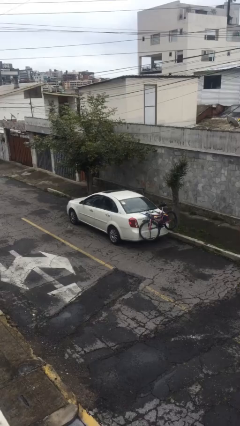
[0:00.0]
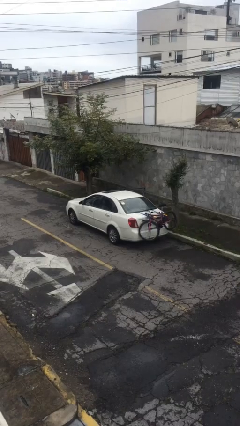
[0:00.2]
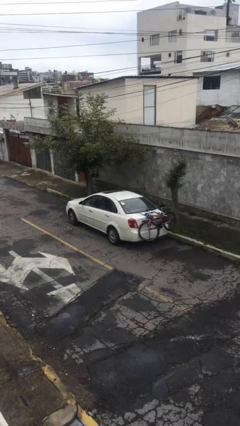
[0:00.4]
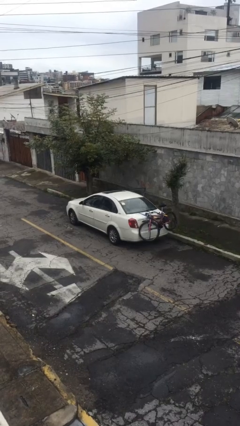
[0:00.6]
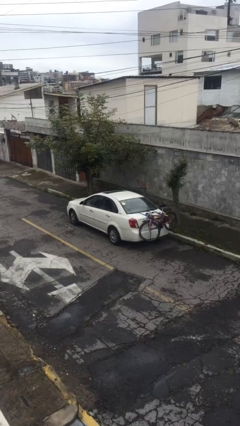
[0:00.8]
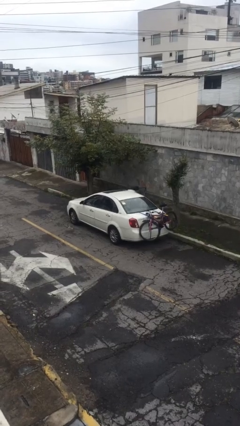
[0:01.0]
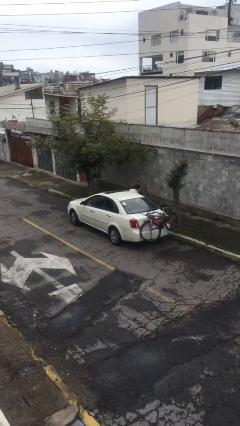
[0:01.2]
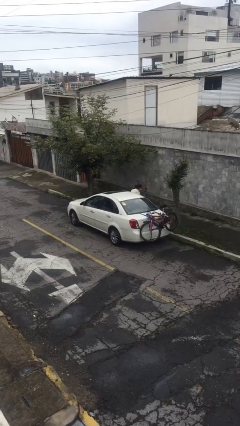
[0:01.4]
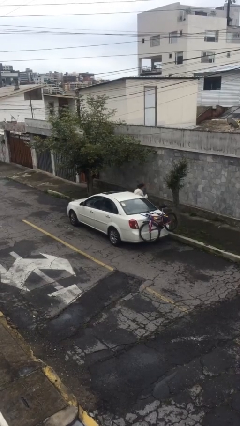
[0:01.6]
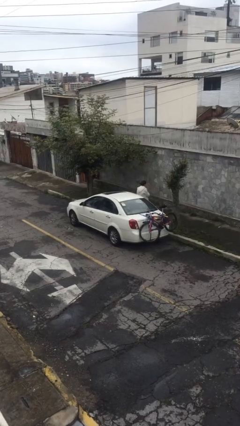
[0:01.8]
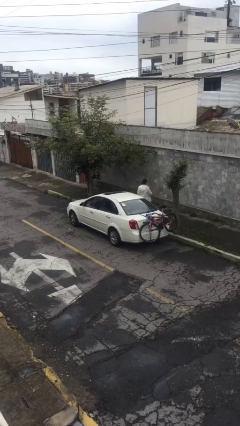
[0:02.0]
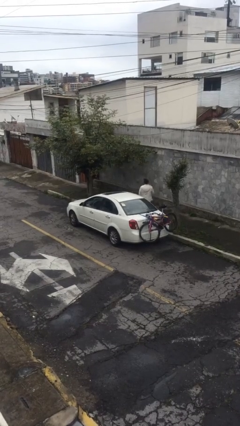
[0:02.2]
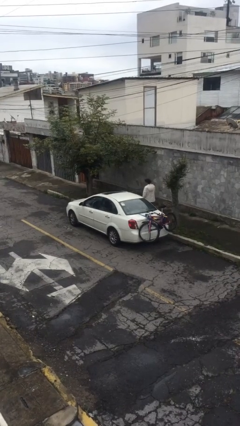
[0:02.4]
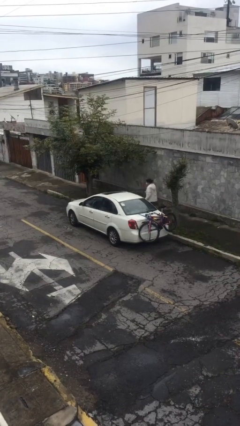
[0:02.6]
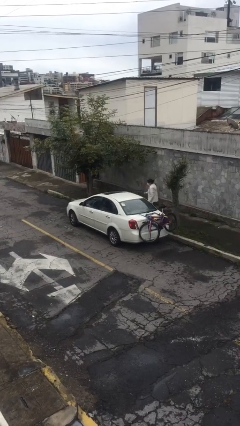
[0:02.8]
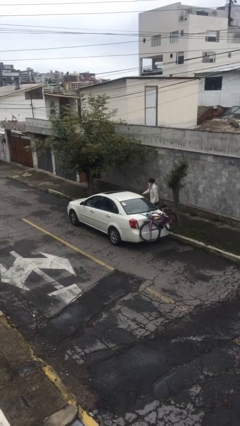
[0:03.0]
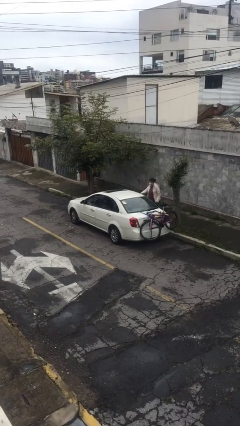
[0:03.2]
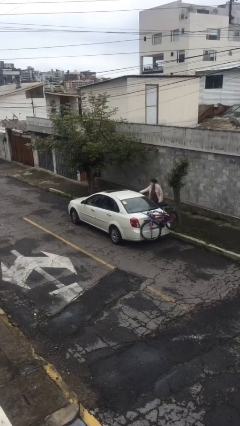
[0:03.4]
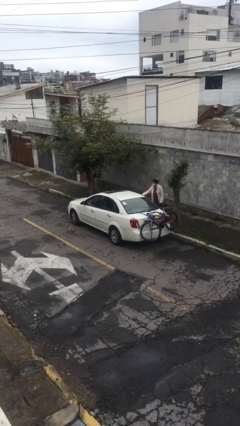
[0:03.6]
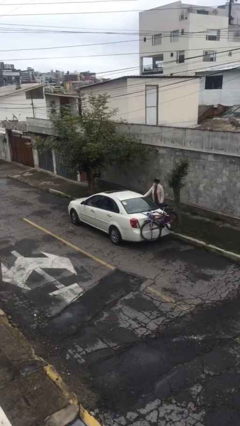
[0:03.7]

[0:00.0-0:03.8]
car drops off person

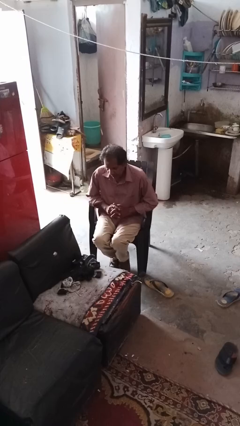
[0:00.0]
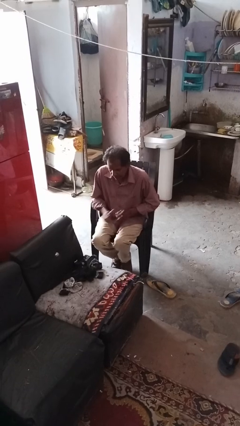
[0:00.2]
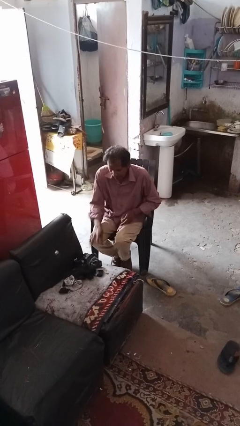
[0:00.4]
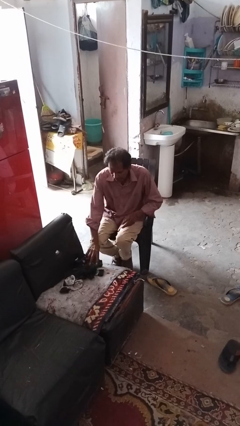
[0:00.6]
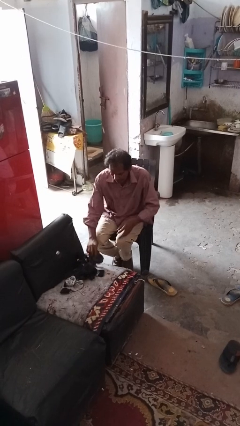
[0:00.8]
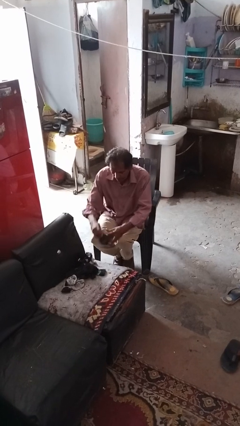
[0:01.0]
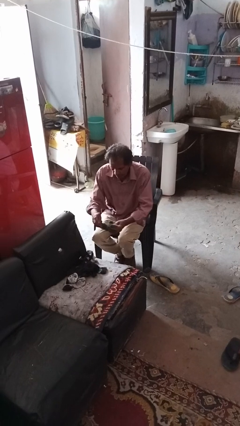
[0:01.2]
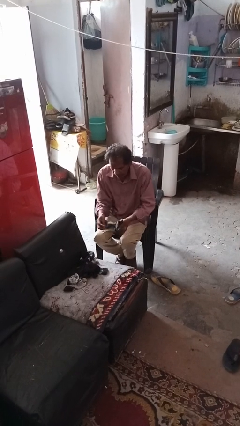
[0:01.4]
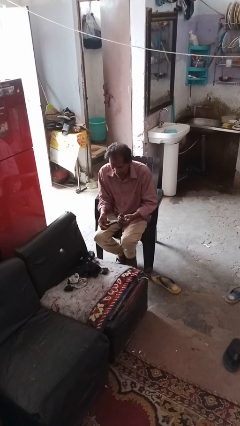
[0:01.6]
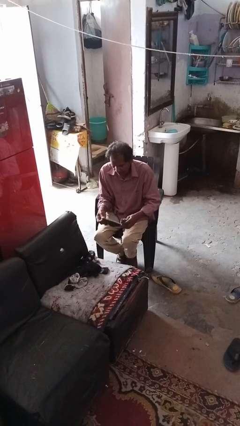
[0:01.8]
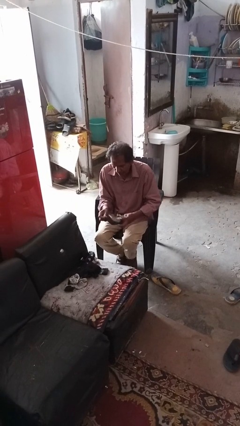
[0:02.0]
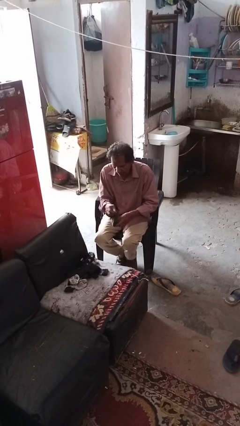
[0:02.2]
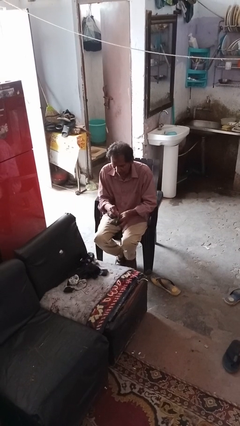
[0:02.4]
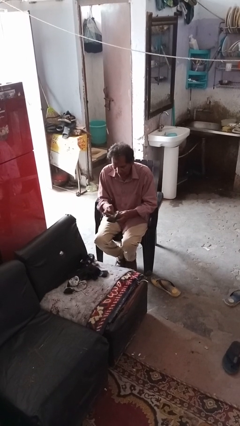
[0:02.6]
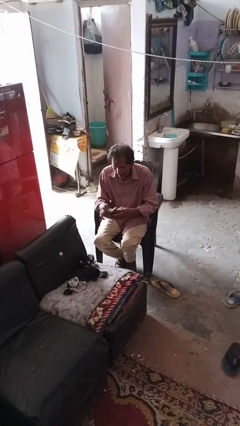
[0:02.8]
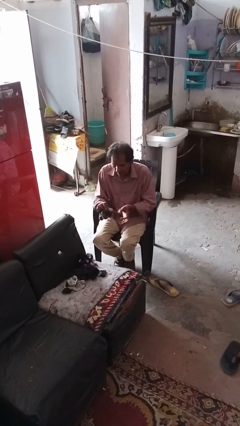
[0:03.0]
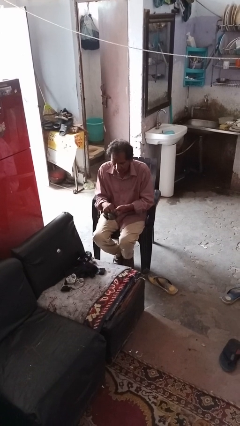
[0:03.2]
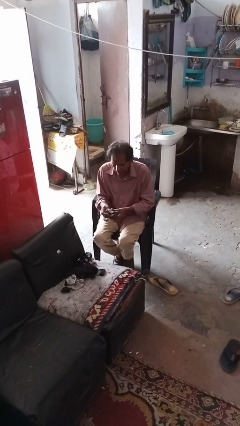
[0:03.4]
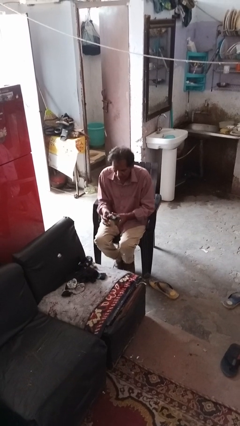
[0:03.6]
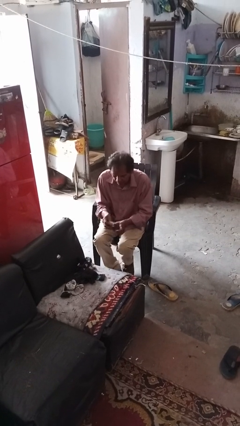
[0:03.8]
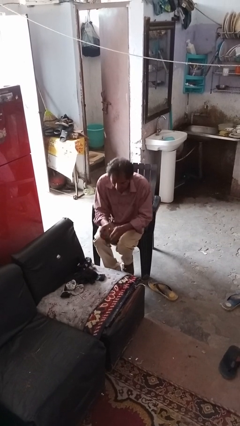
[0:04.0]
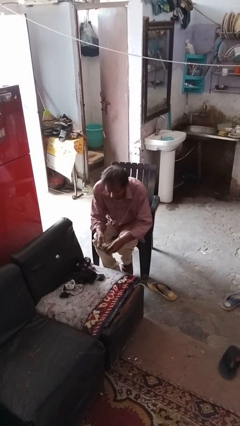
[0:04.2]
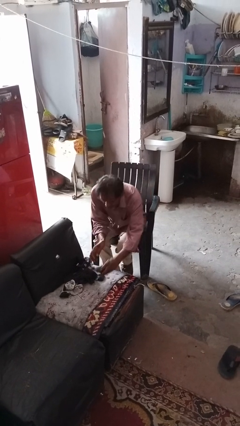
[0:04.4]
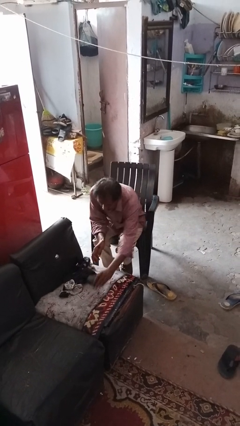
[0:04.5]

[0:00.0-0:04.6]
person folds socks

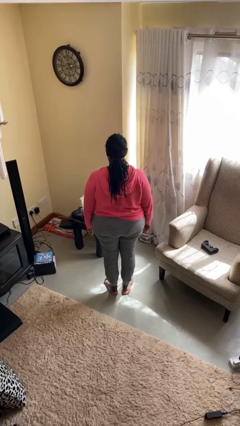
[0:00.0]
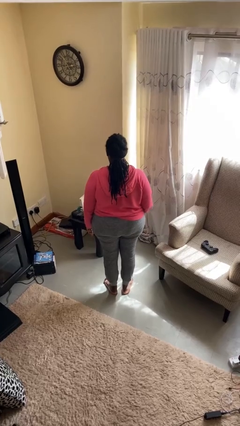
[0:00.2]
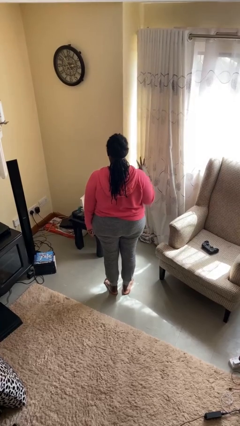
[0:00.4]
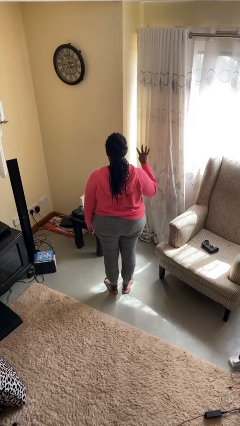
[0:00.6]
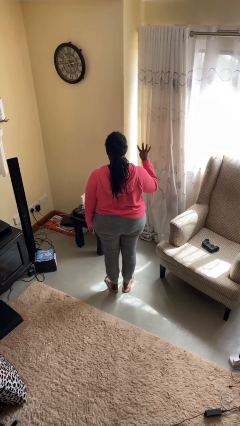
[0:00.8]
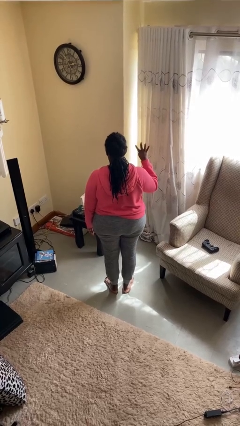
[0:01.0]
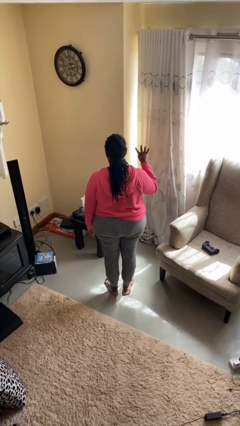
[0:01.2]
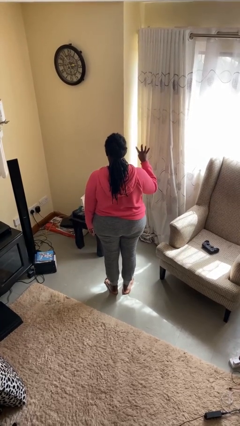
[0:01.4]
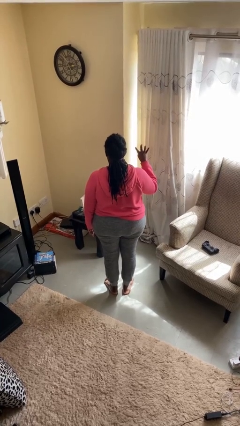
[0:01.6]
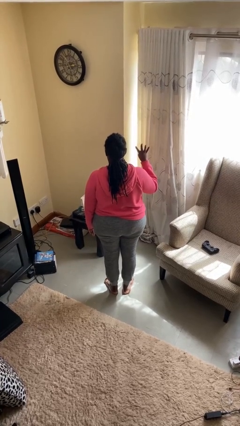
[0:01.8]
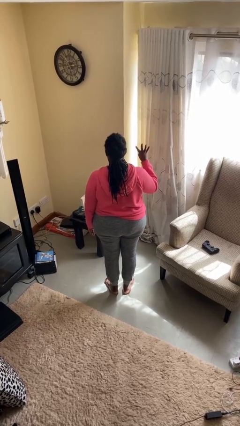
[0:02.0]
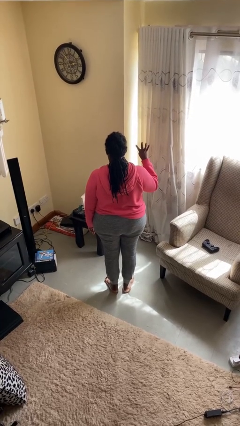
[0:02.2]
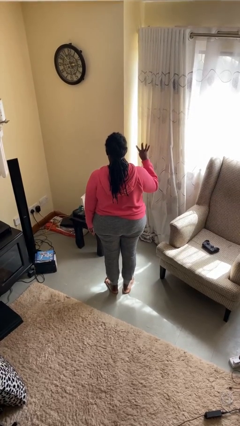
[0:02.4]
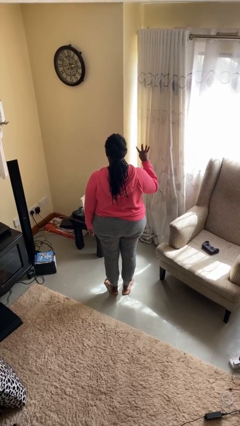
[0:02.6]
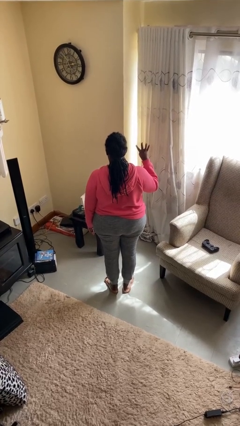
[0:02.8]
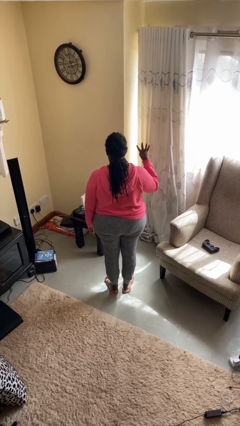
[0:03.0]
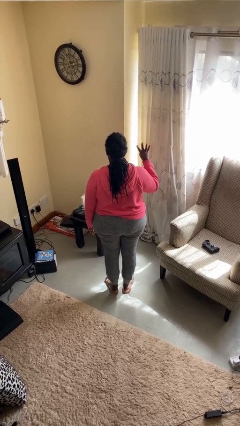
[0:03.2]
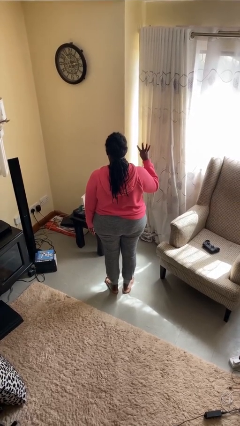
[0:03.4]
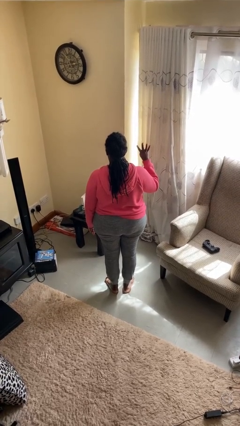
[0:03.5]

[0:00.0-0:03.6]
person gestures number four

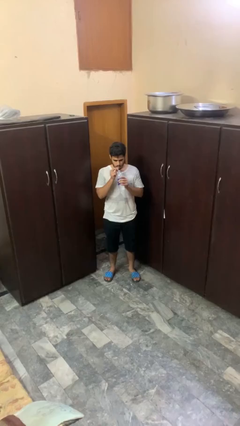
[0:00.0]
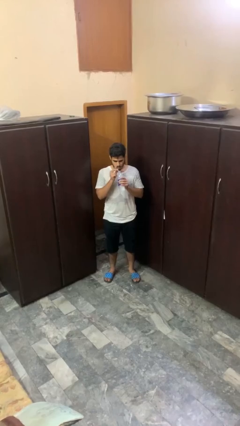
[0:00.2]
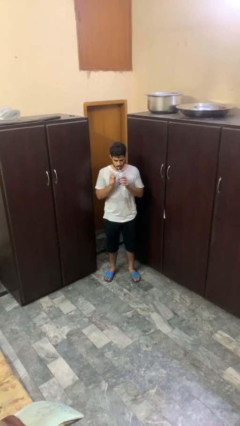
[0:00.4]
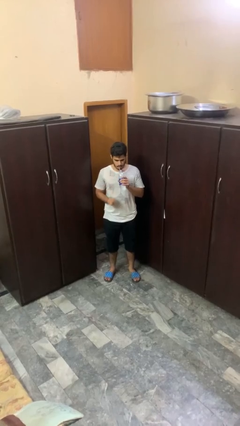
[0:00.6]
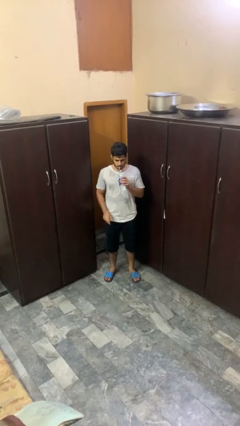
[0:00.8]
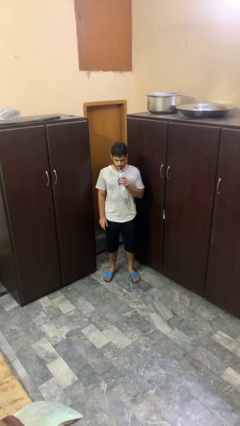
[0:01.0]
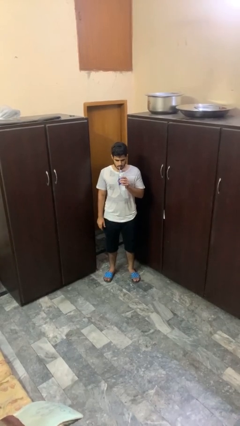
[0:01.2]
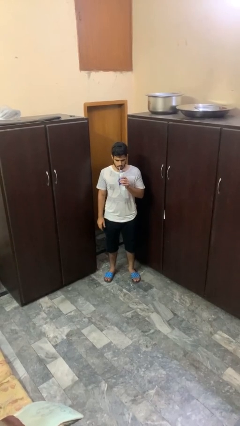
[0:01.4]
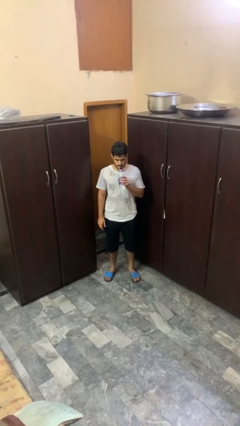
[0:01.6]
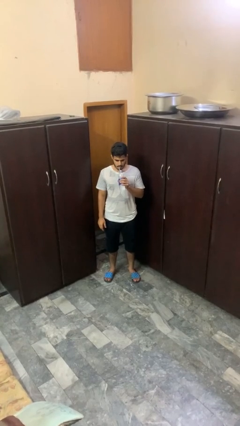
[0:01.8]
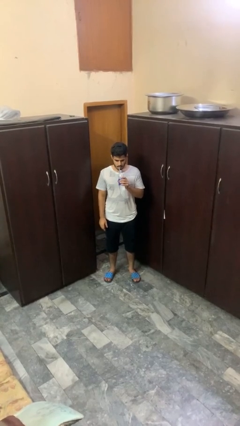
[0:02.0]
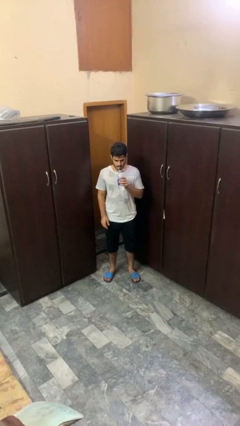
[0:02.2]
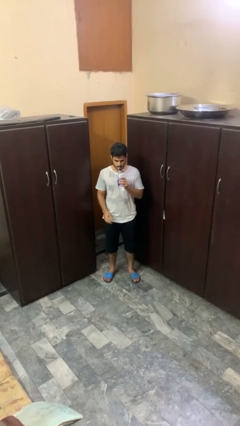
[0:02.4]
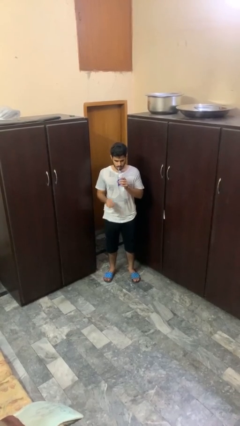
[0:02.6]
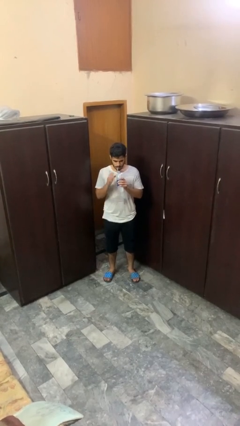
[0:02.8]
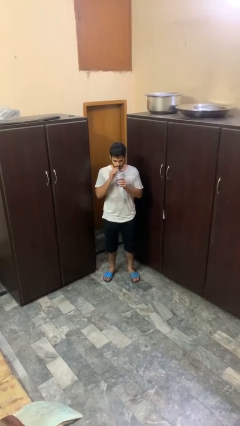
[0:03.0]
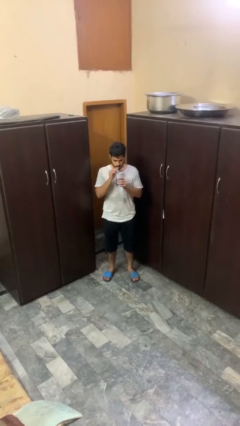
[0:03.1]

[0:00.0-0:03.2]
person drinks from straw

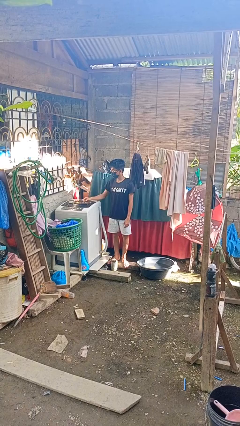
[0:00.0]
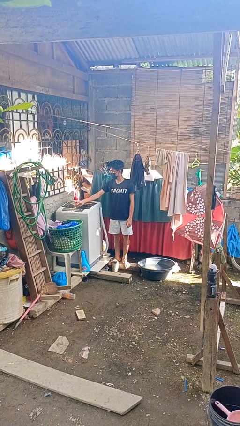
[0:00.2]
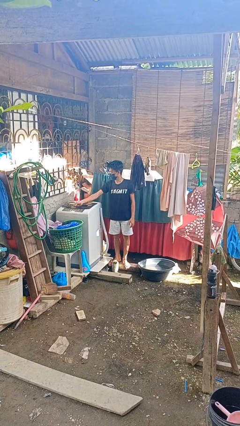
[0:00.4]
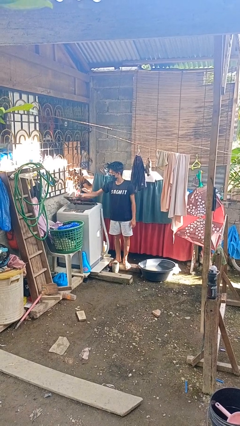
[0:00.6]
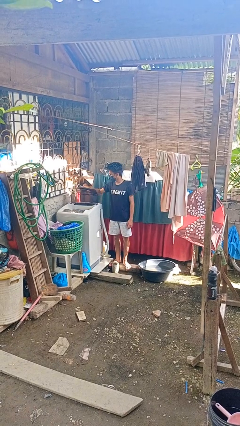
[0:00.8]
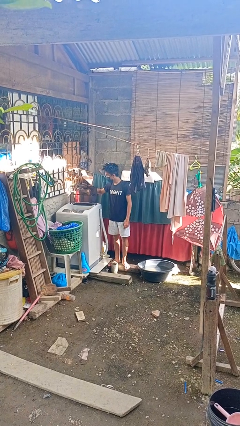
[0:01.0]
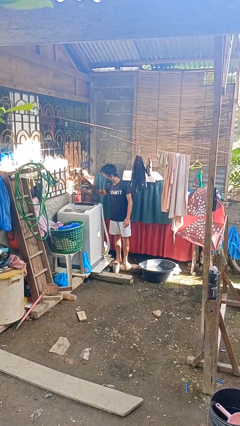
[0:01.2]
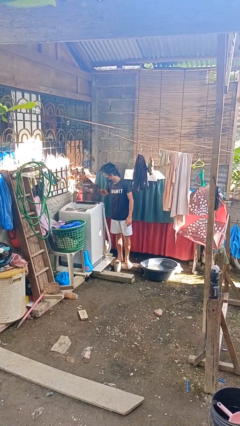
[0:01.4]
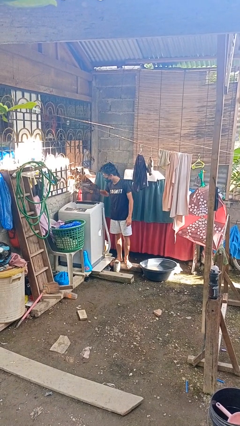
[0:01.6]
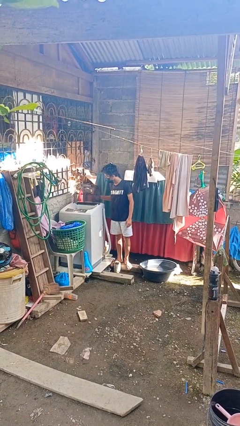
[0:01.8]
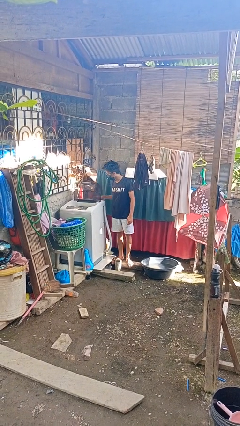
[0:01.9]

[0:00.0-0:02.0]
person opens clothes washer

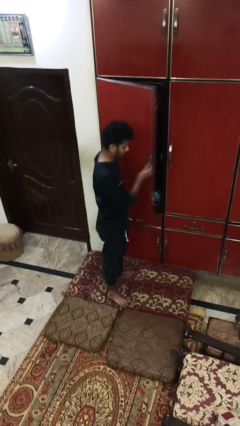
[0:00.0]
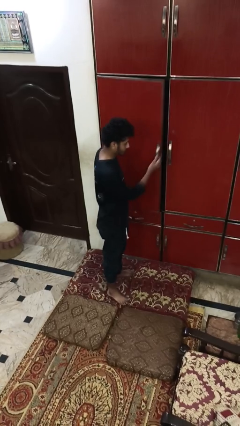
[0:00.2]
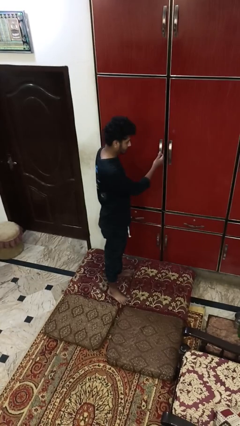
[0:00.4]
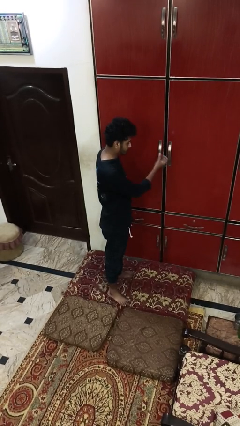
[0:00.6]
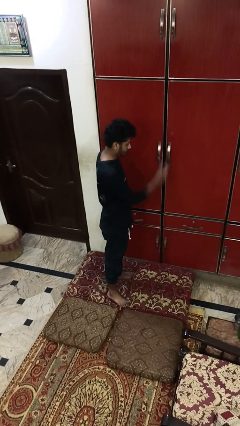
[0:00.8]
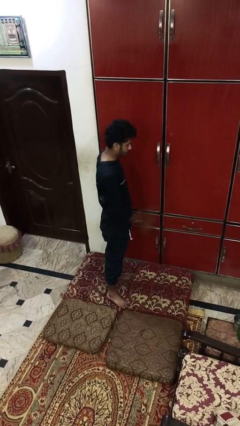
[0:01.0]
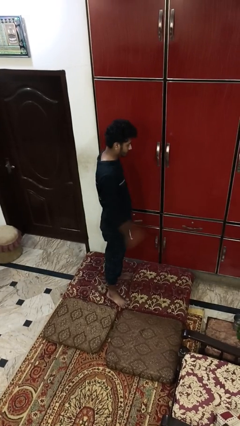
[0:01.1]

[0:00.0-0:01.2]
person closes closet door
